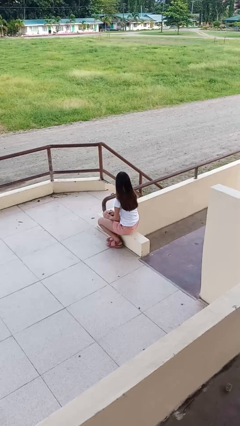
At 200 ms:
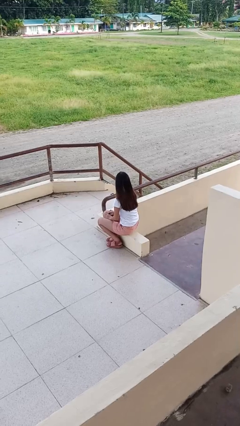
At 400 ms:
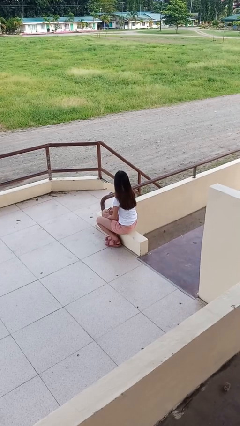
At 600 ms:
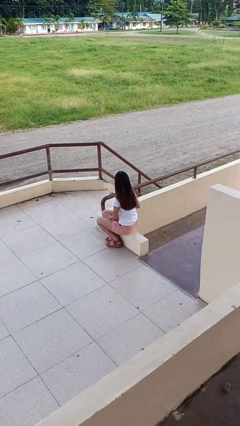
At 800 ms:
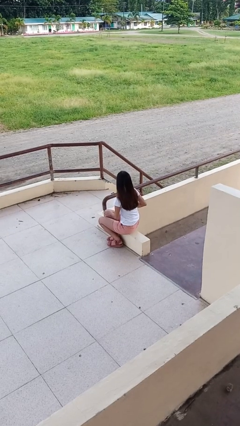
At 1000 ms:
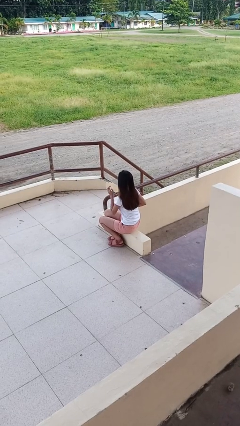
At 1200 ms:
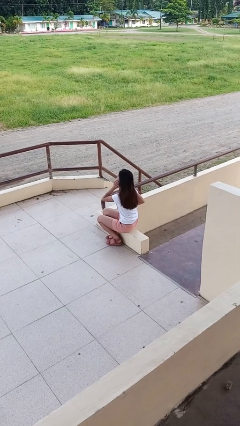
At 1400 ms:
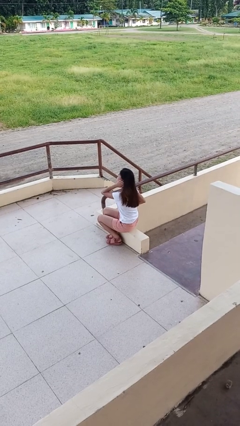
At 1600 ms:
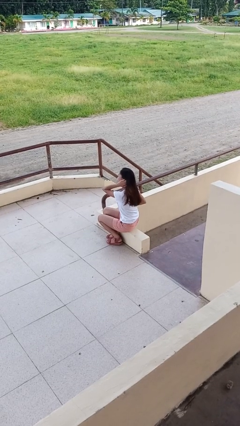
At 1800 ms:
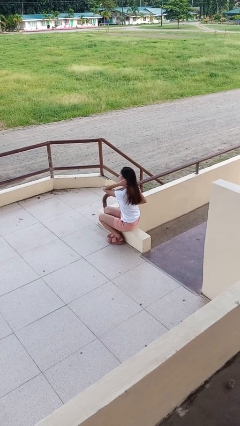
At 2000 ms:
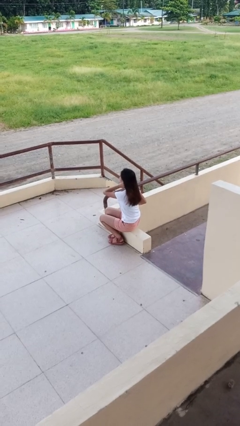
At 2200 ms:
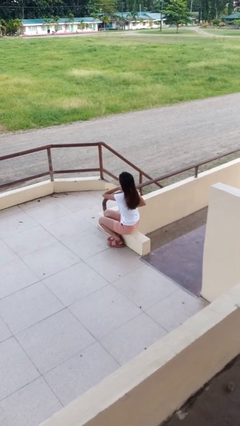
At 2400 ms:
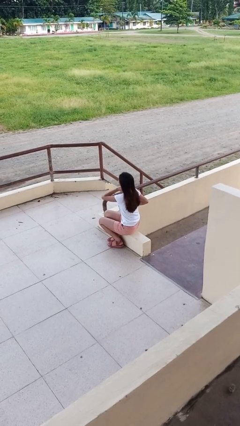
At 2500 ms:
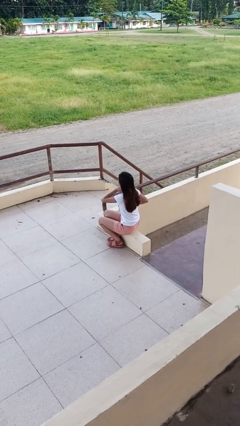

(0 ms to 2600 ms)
person rubs neck

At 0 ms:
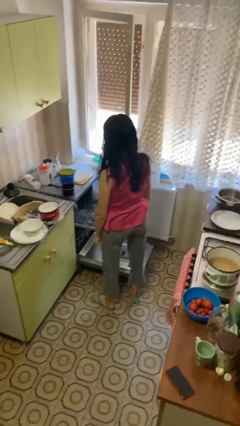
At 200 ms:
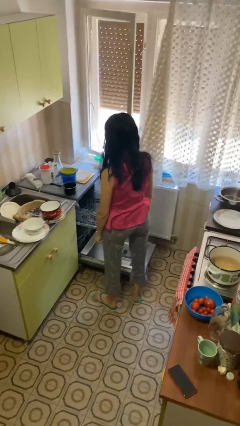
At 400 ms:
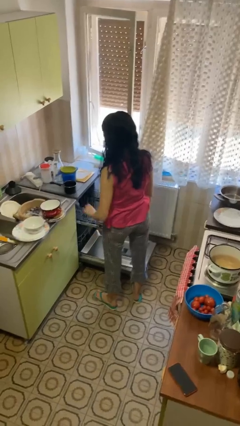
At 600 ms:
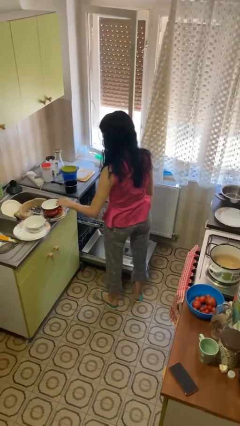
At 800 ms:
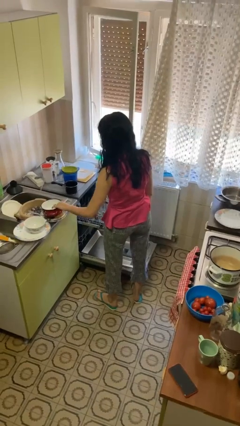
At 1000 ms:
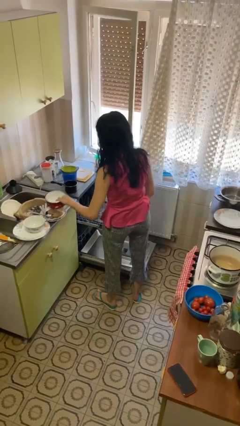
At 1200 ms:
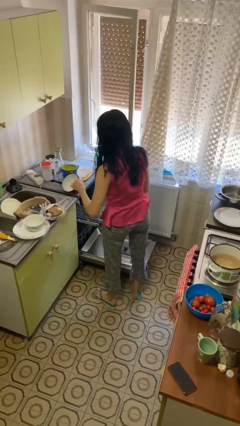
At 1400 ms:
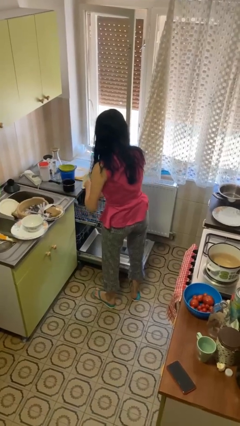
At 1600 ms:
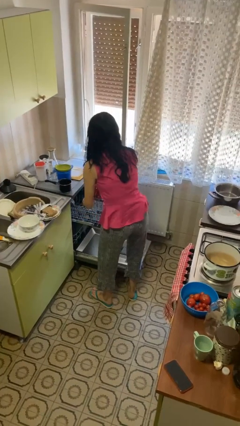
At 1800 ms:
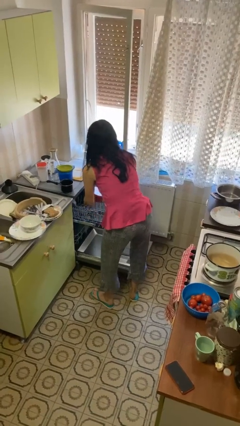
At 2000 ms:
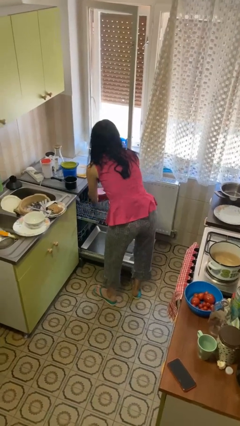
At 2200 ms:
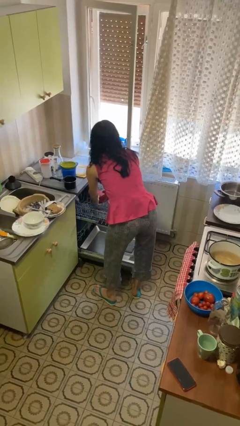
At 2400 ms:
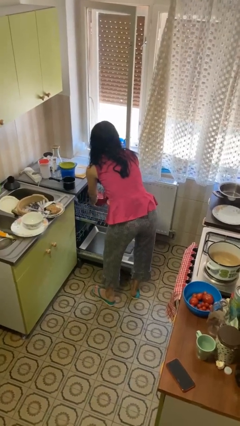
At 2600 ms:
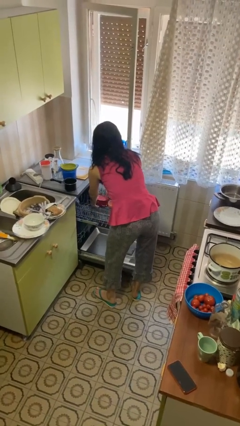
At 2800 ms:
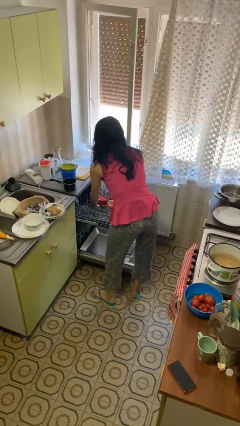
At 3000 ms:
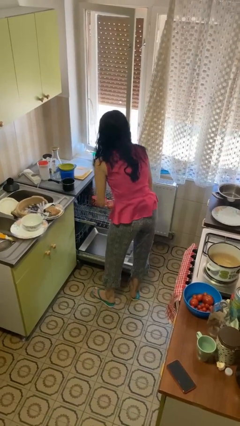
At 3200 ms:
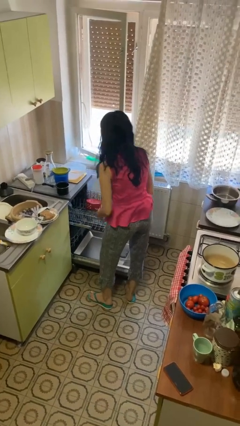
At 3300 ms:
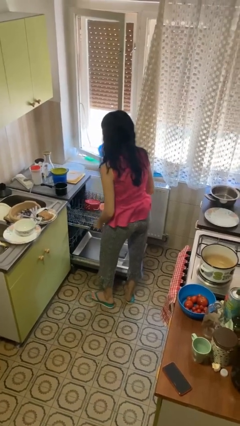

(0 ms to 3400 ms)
person loads dishwasher

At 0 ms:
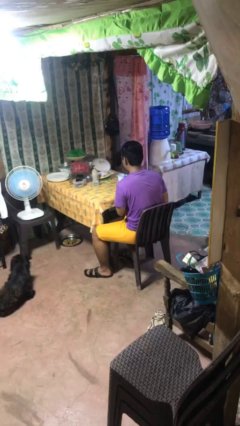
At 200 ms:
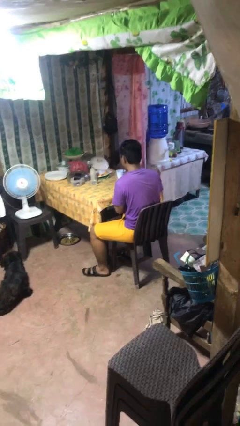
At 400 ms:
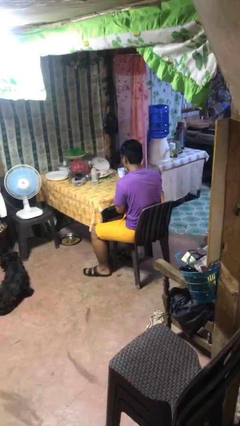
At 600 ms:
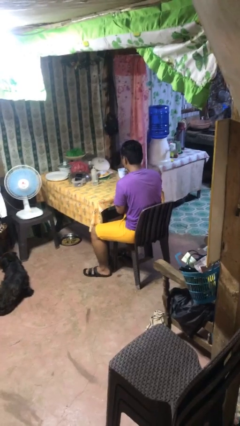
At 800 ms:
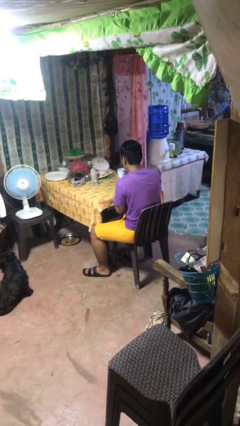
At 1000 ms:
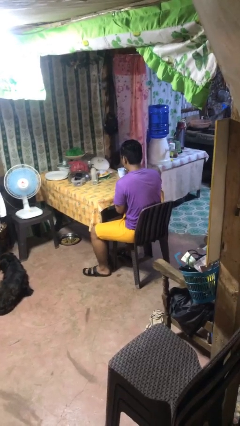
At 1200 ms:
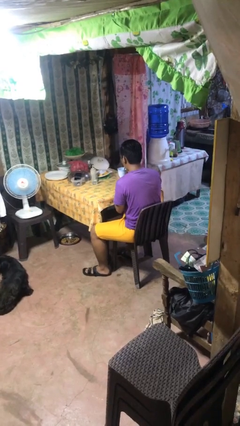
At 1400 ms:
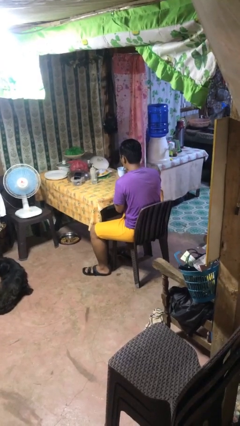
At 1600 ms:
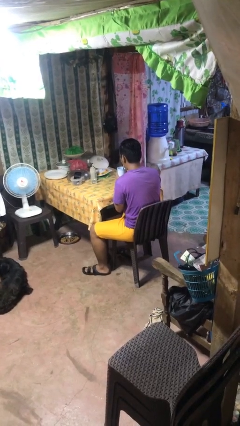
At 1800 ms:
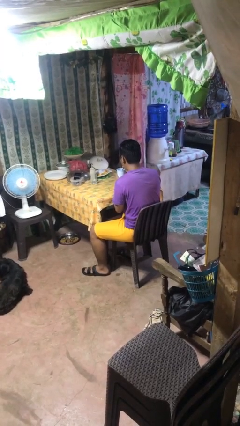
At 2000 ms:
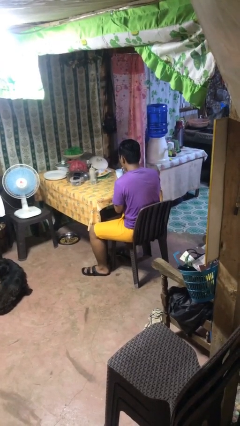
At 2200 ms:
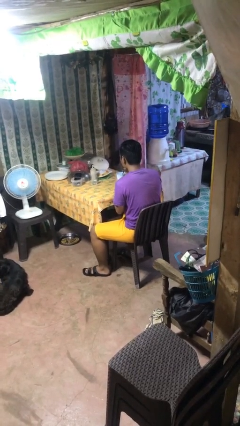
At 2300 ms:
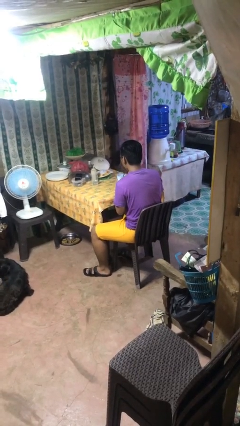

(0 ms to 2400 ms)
person drinks from straw

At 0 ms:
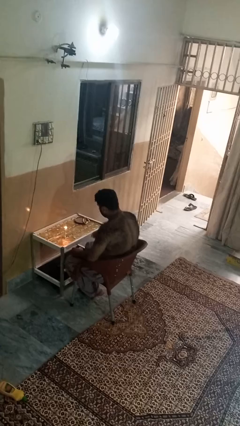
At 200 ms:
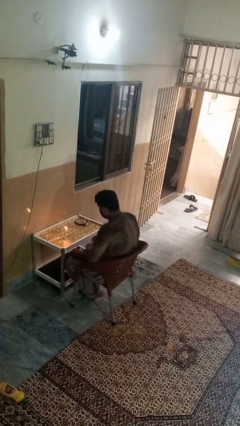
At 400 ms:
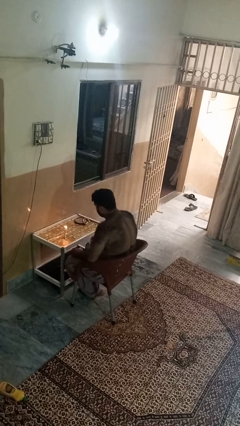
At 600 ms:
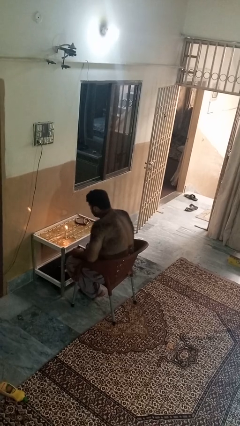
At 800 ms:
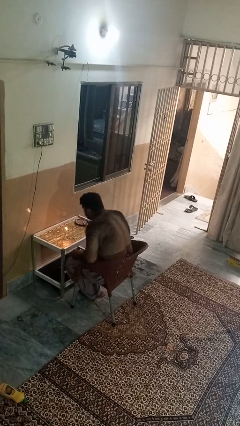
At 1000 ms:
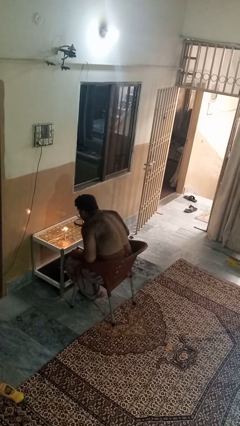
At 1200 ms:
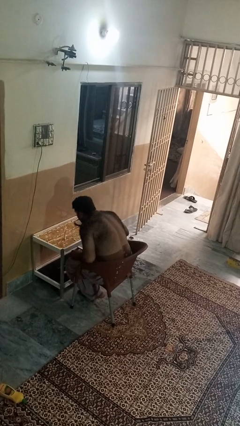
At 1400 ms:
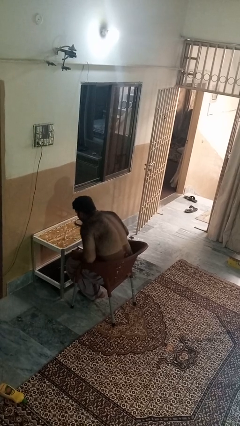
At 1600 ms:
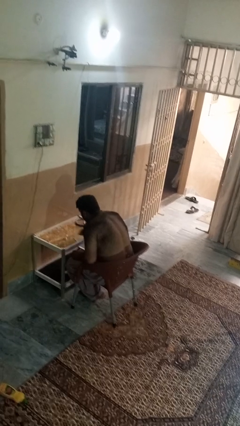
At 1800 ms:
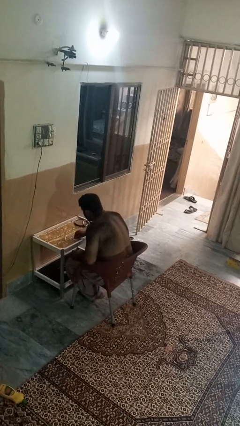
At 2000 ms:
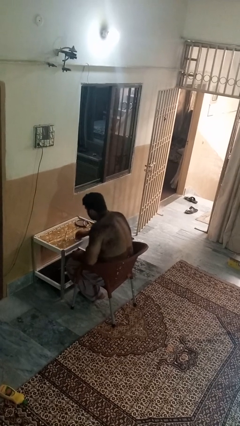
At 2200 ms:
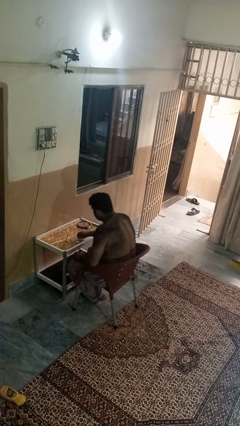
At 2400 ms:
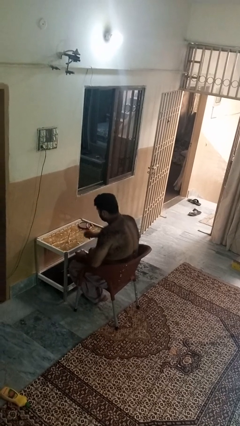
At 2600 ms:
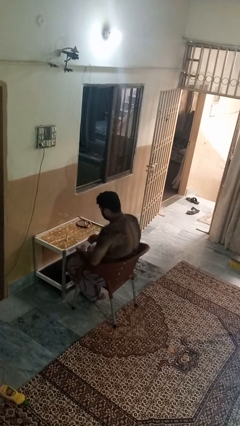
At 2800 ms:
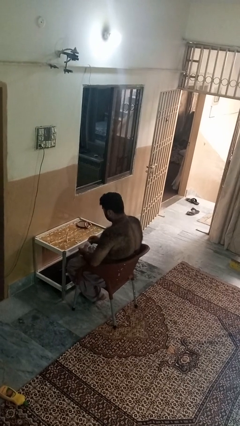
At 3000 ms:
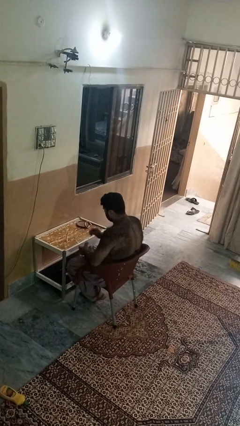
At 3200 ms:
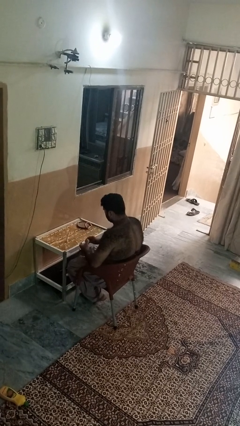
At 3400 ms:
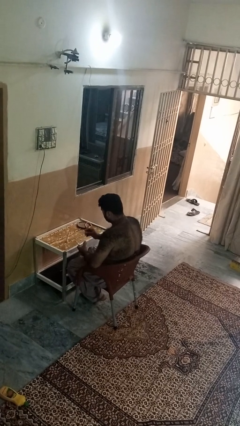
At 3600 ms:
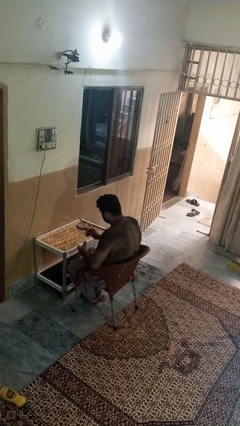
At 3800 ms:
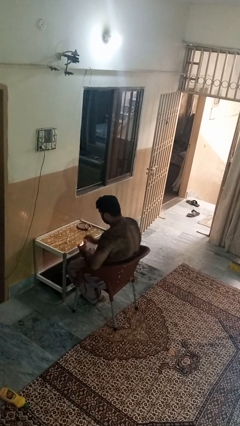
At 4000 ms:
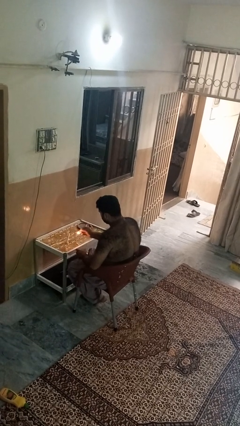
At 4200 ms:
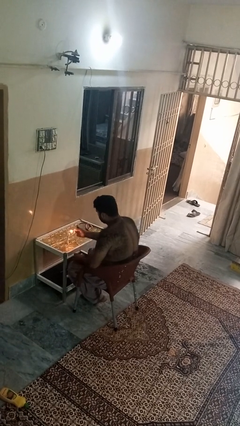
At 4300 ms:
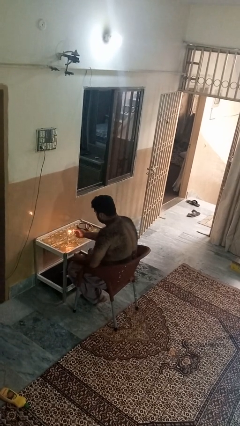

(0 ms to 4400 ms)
person nods head

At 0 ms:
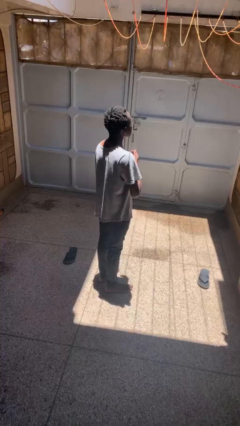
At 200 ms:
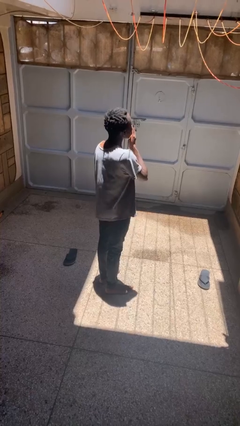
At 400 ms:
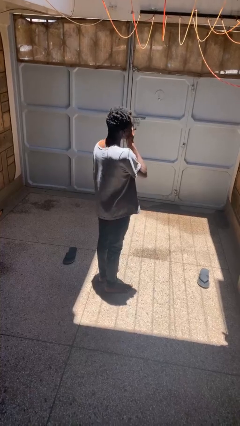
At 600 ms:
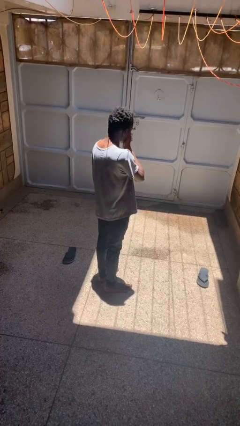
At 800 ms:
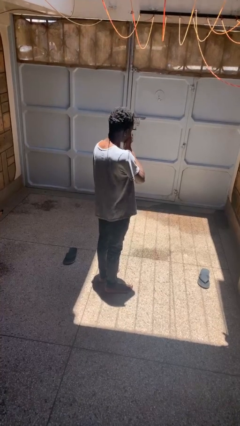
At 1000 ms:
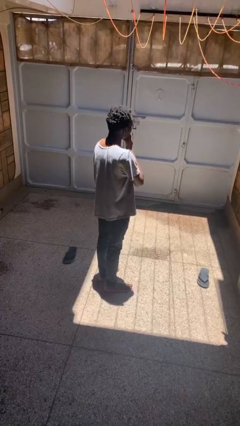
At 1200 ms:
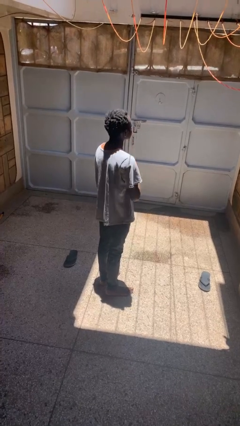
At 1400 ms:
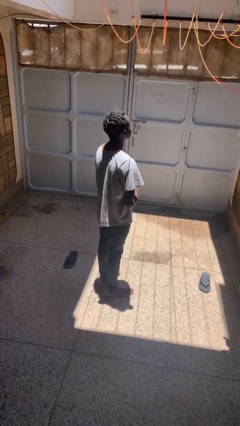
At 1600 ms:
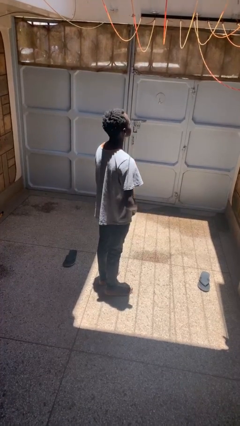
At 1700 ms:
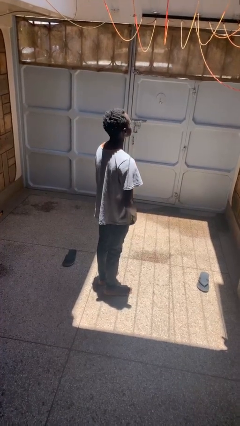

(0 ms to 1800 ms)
person sneezes into hand

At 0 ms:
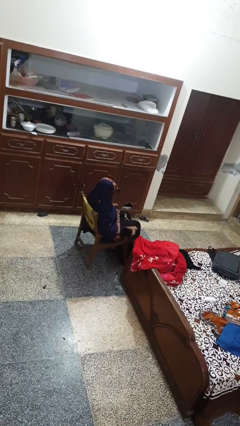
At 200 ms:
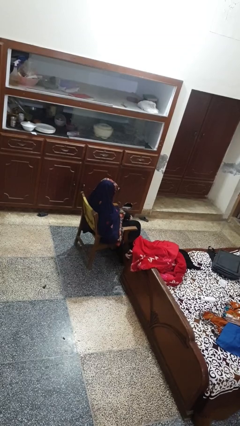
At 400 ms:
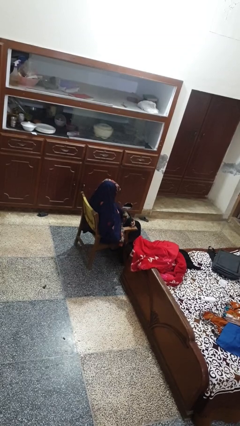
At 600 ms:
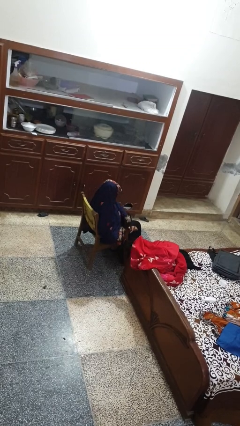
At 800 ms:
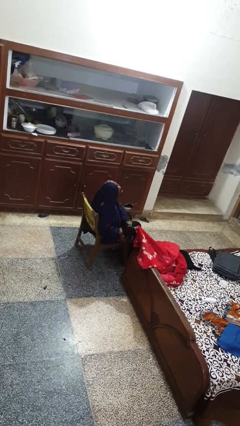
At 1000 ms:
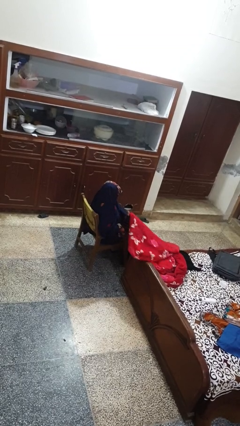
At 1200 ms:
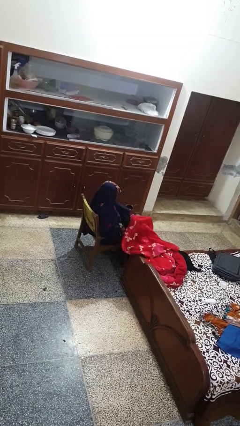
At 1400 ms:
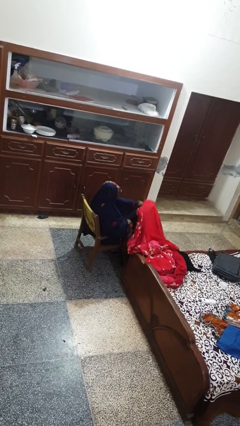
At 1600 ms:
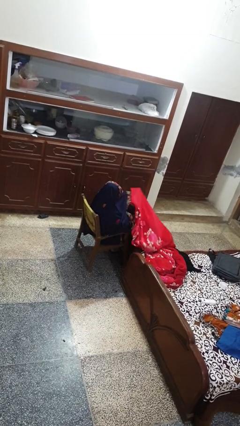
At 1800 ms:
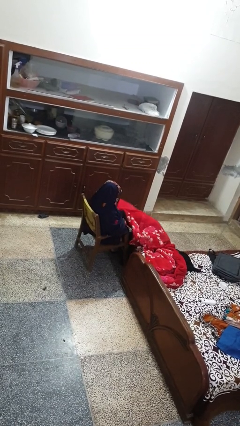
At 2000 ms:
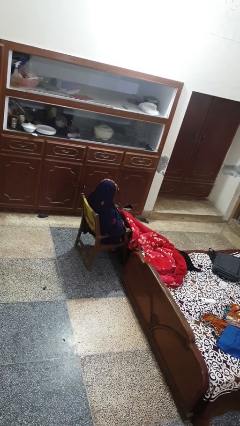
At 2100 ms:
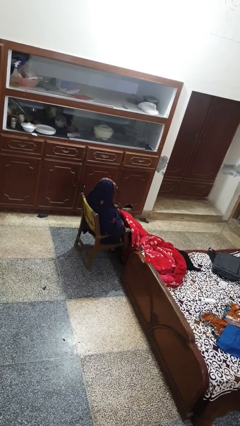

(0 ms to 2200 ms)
person covers with blanket

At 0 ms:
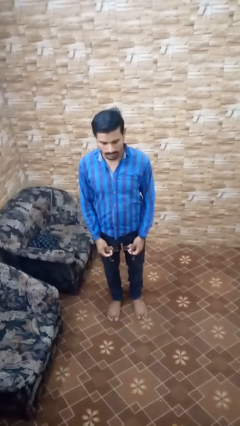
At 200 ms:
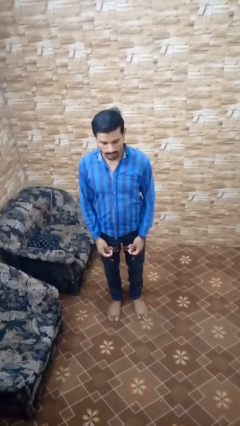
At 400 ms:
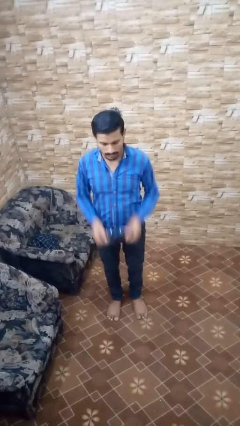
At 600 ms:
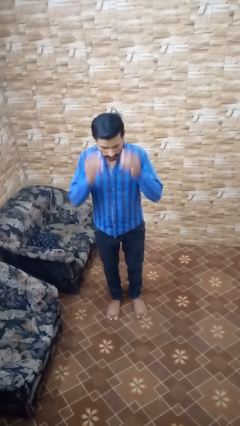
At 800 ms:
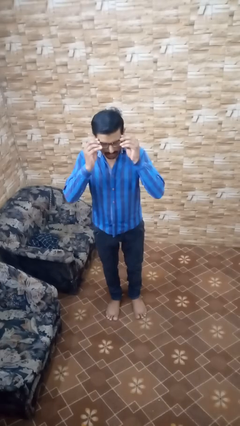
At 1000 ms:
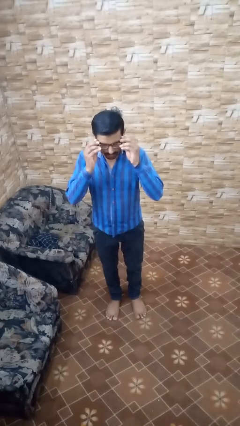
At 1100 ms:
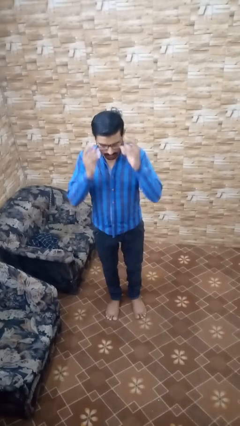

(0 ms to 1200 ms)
person puts on glasses
